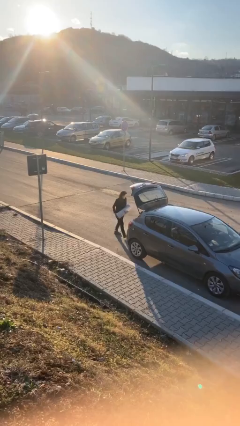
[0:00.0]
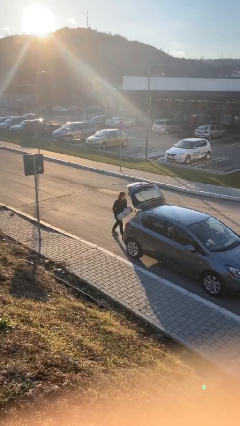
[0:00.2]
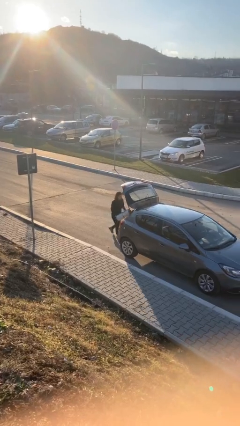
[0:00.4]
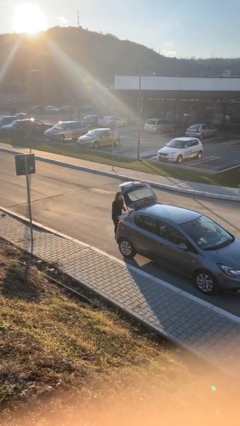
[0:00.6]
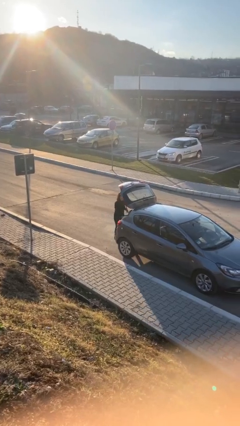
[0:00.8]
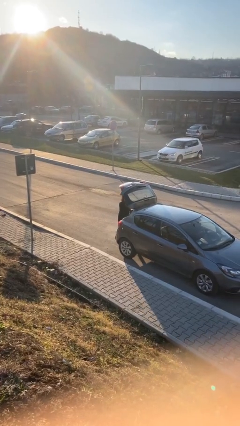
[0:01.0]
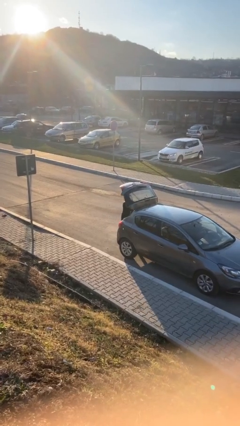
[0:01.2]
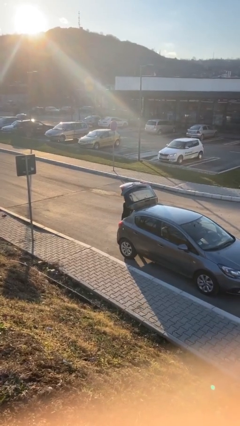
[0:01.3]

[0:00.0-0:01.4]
person loads car

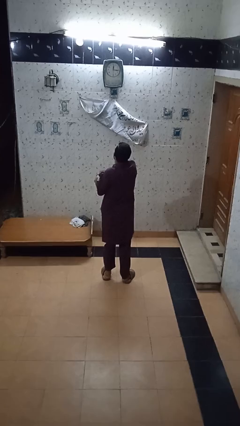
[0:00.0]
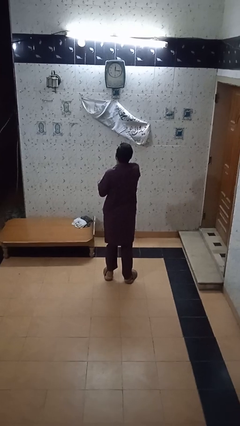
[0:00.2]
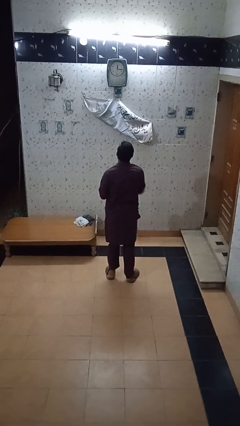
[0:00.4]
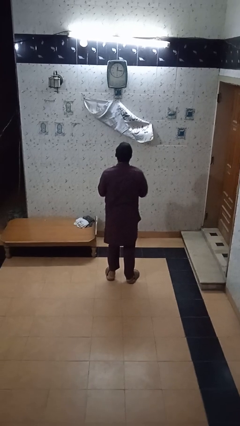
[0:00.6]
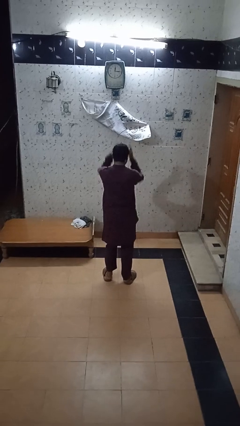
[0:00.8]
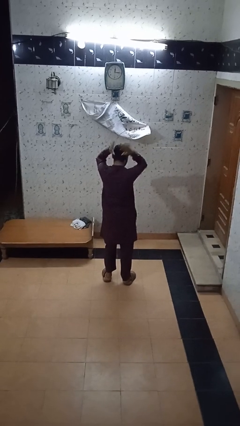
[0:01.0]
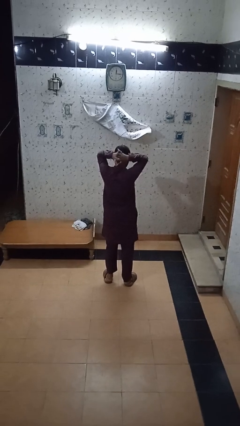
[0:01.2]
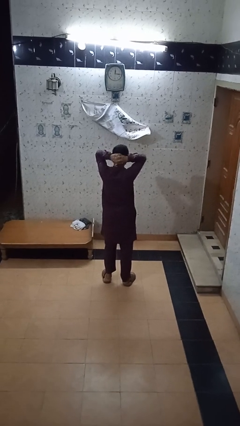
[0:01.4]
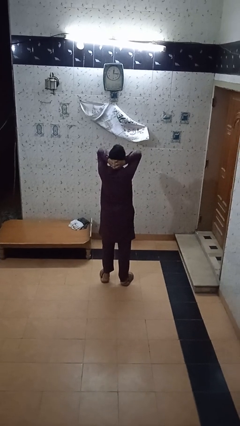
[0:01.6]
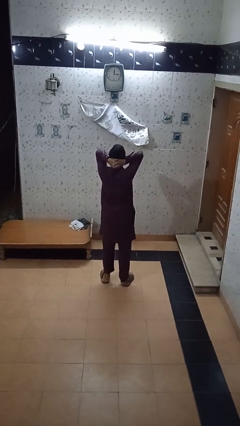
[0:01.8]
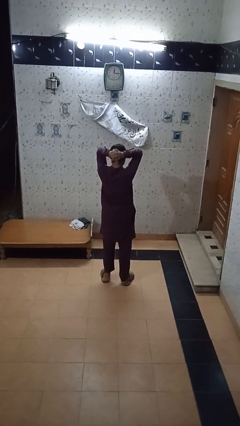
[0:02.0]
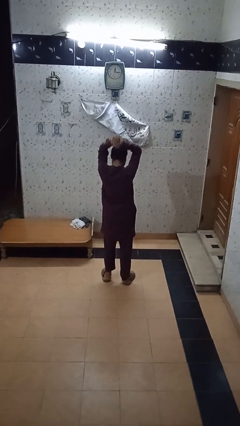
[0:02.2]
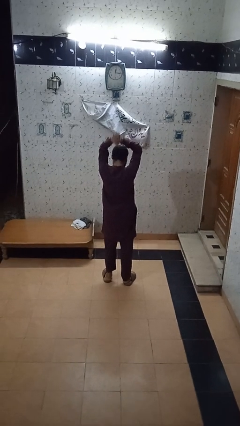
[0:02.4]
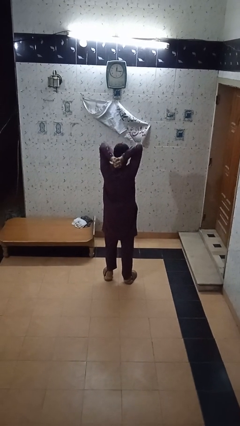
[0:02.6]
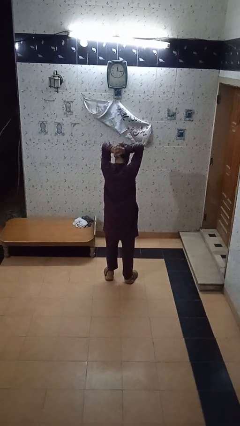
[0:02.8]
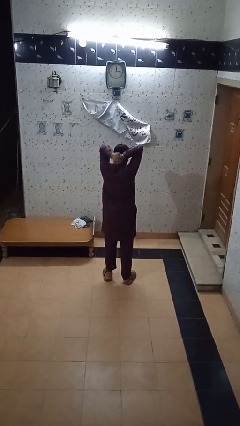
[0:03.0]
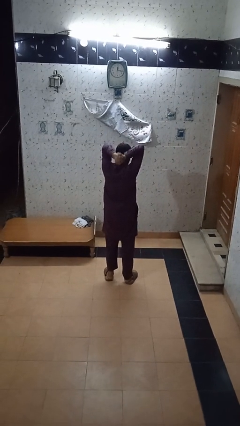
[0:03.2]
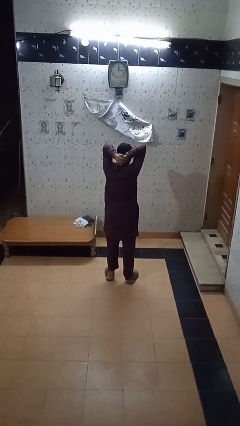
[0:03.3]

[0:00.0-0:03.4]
person stretches arms over head

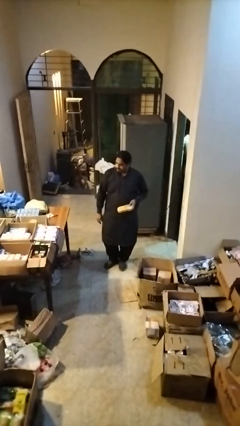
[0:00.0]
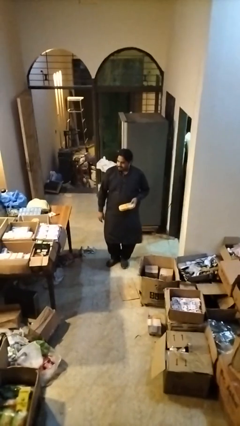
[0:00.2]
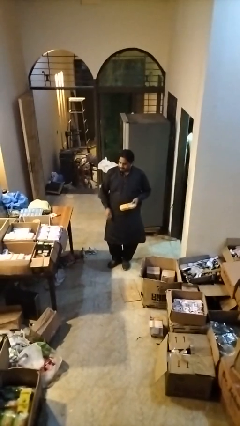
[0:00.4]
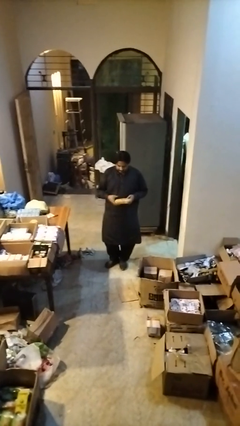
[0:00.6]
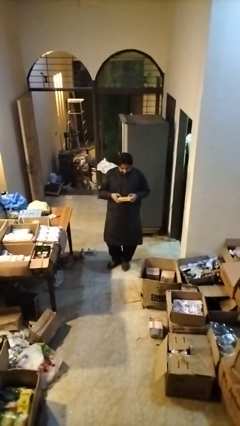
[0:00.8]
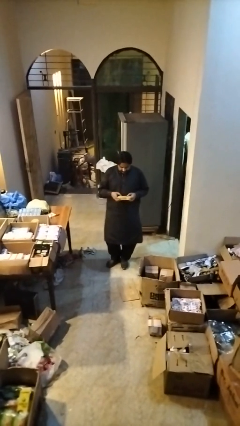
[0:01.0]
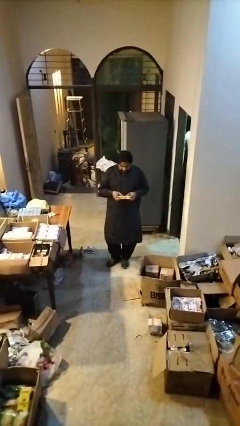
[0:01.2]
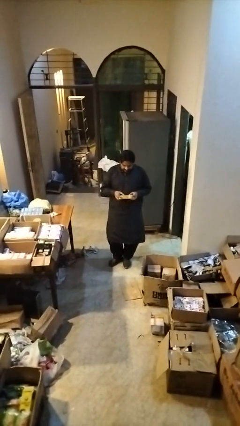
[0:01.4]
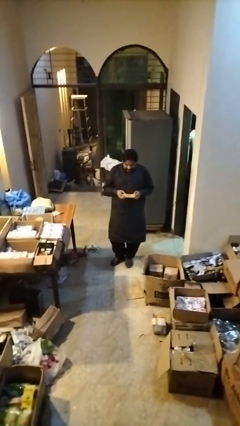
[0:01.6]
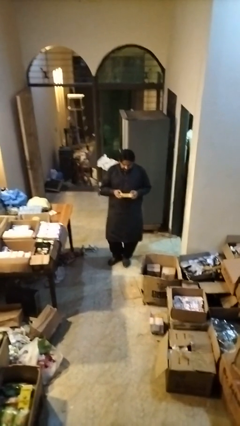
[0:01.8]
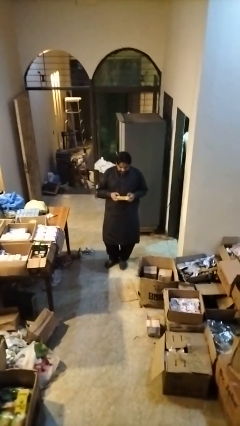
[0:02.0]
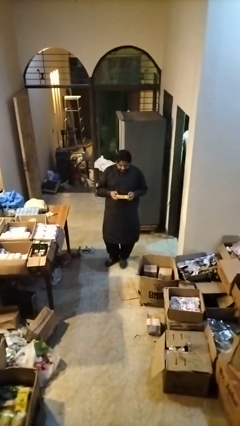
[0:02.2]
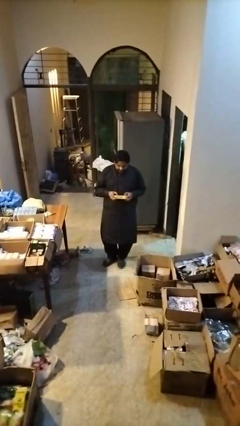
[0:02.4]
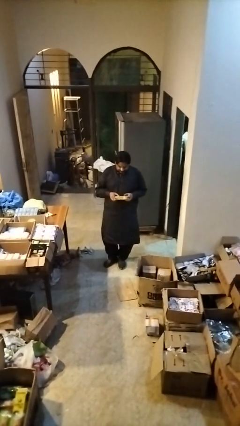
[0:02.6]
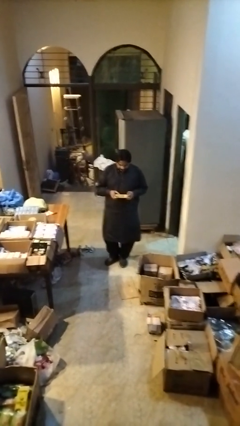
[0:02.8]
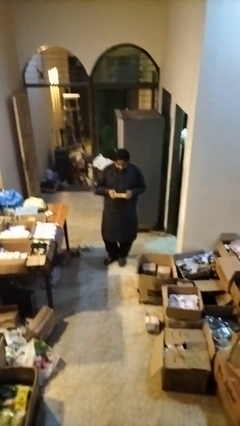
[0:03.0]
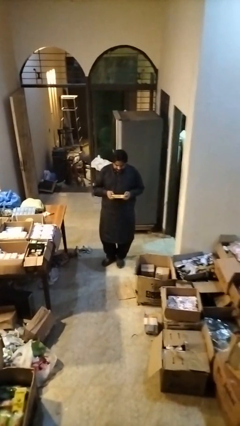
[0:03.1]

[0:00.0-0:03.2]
person interacts with handheld game

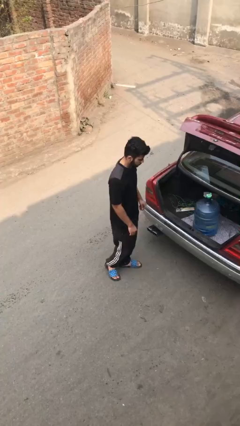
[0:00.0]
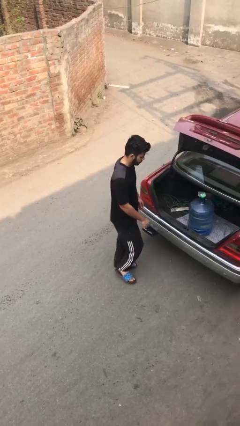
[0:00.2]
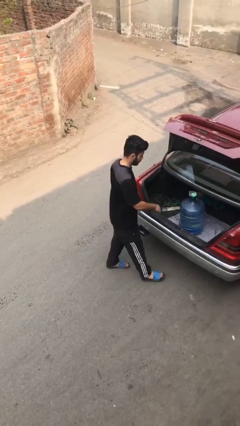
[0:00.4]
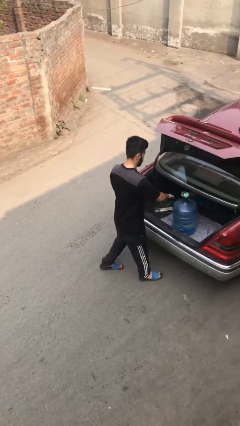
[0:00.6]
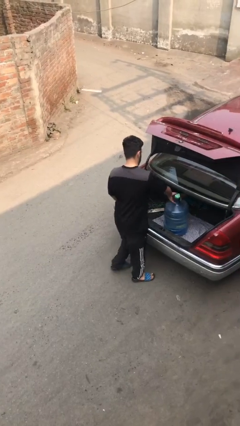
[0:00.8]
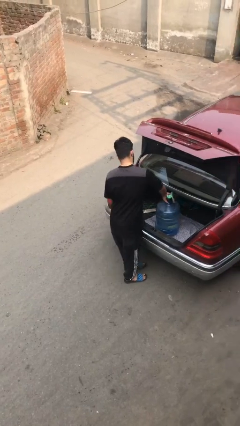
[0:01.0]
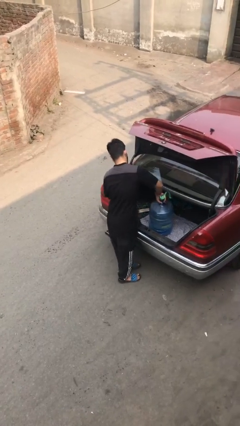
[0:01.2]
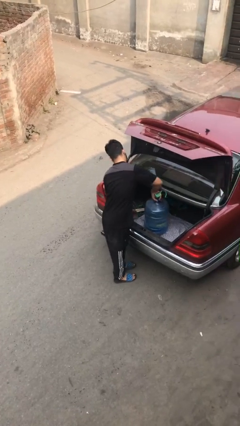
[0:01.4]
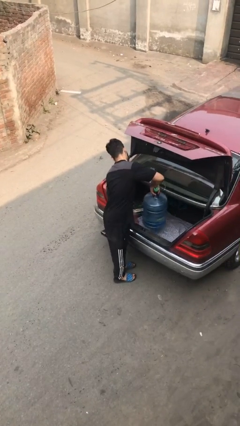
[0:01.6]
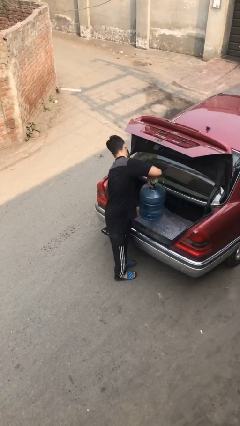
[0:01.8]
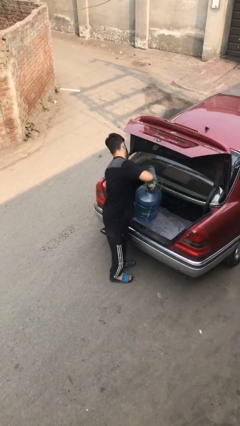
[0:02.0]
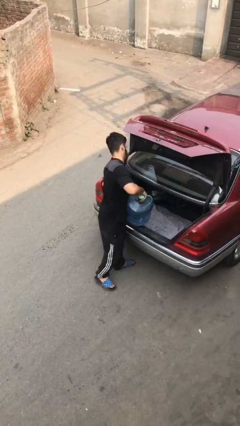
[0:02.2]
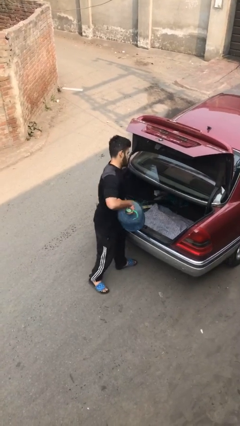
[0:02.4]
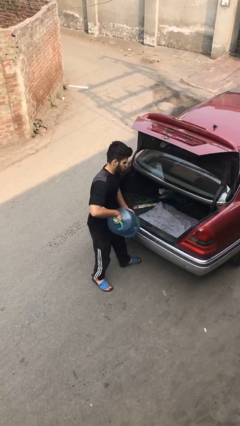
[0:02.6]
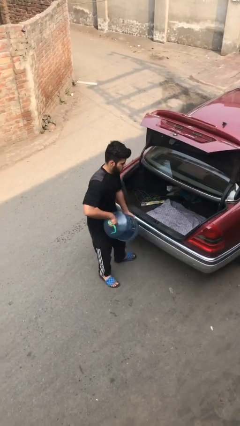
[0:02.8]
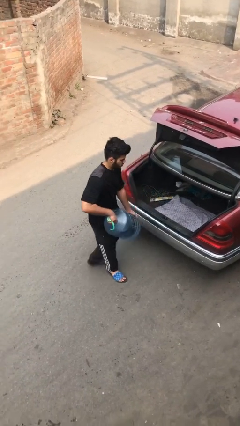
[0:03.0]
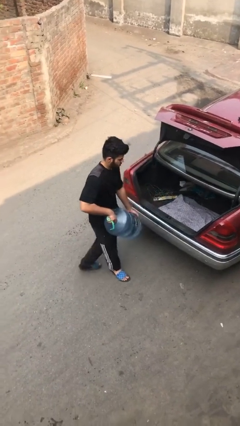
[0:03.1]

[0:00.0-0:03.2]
person unloads car

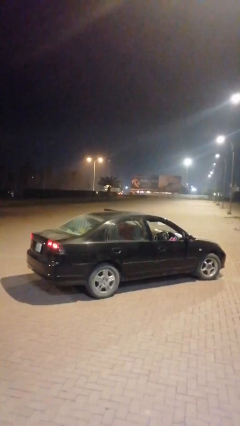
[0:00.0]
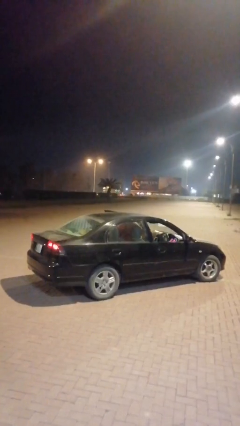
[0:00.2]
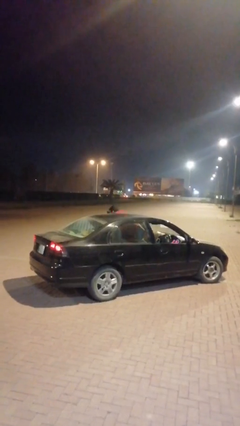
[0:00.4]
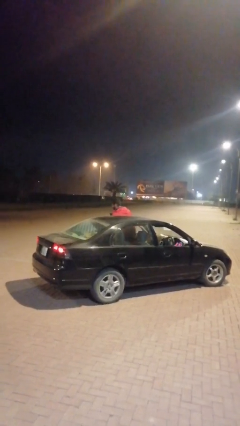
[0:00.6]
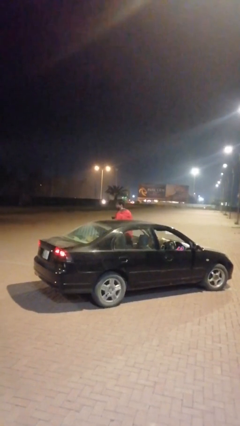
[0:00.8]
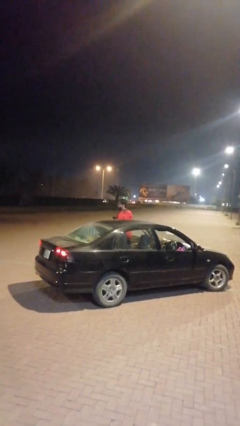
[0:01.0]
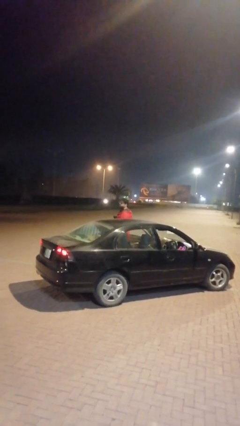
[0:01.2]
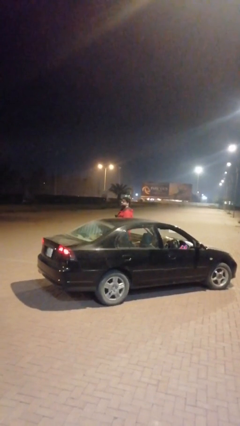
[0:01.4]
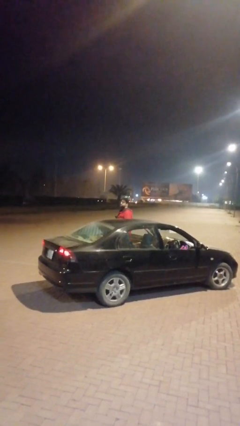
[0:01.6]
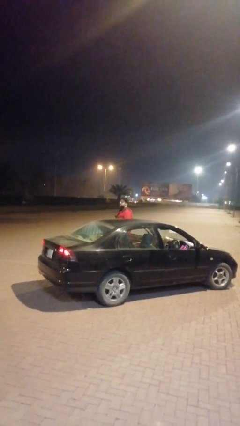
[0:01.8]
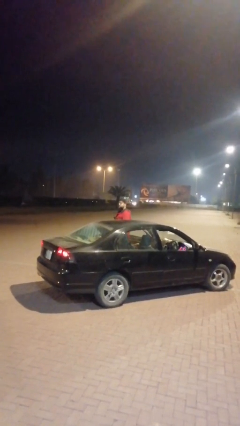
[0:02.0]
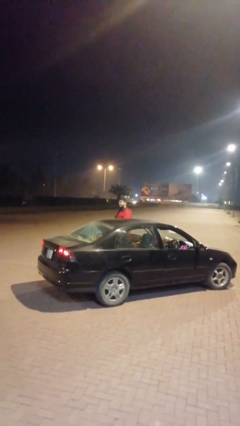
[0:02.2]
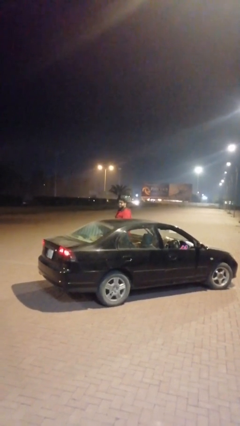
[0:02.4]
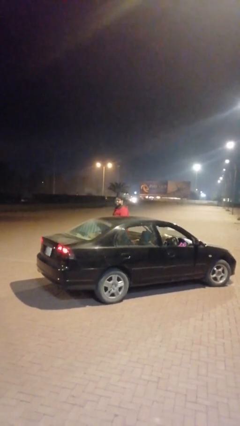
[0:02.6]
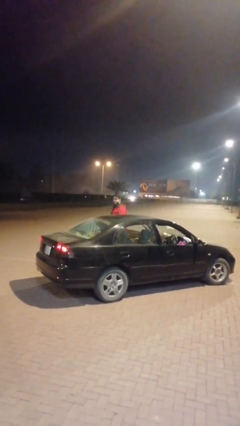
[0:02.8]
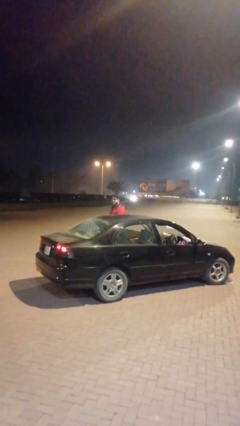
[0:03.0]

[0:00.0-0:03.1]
person exits car

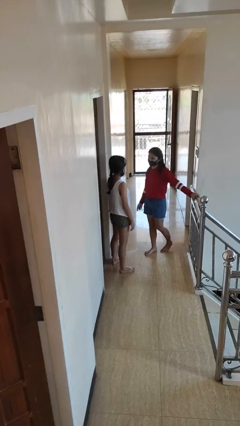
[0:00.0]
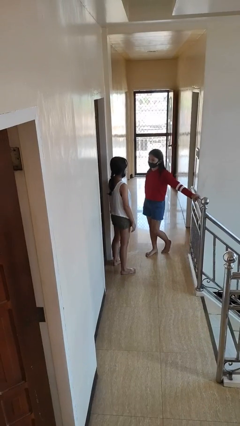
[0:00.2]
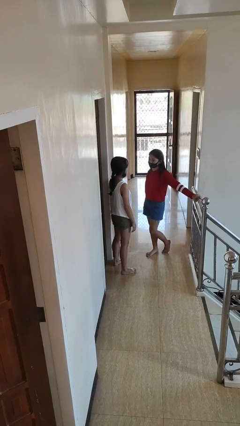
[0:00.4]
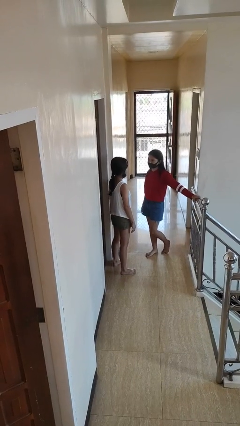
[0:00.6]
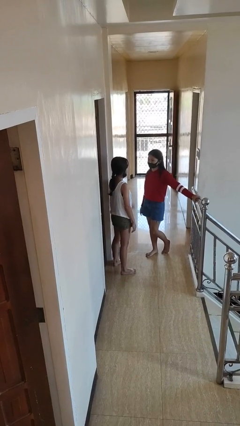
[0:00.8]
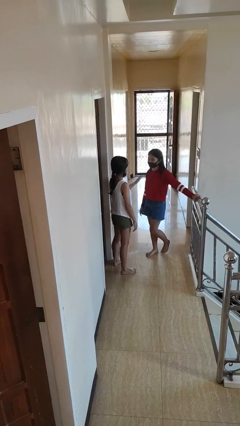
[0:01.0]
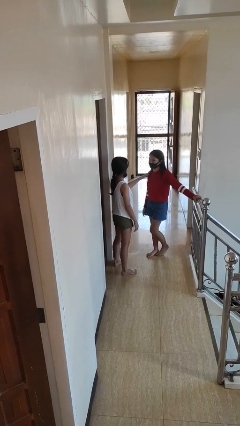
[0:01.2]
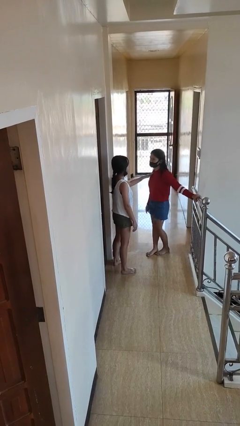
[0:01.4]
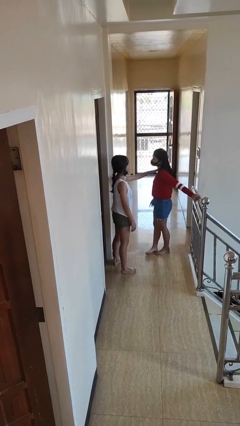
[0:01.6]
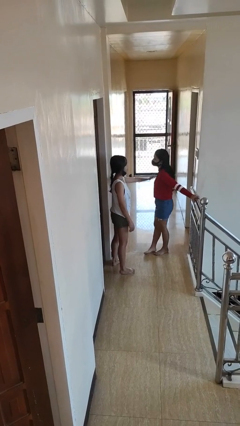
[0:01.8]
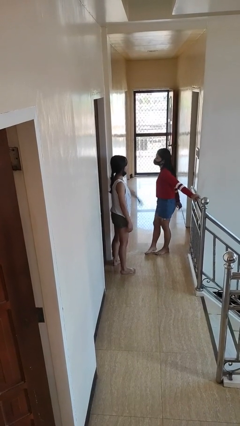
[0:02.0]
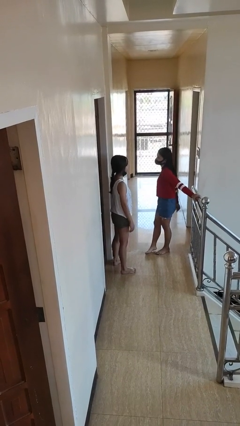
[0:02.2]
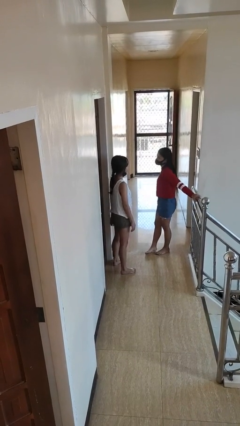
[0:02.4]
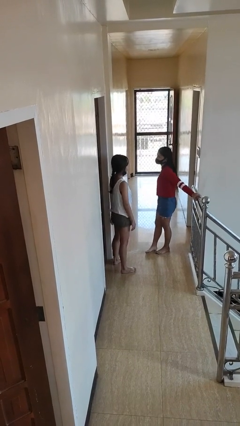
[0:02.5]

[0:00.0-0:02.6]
person shoves person

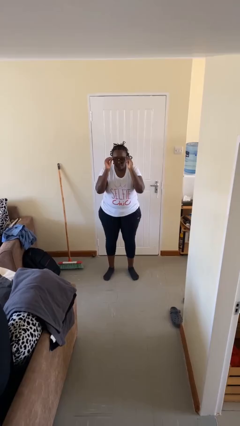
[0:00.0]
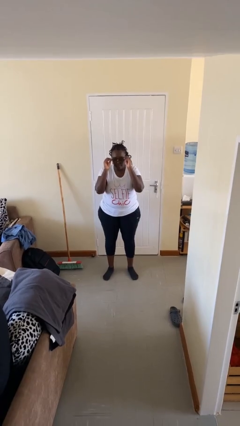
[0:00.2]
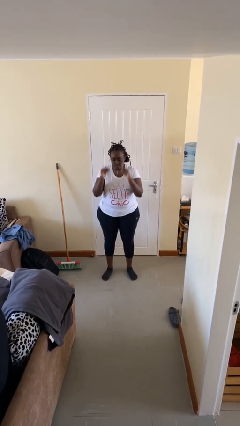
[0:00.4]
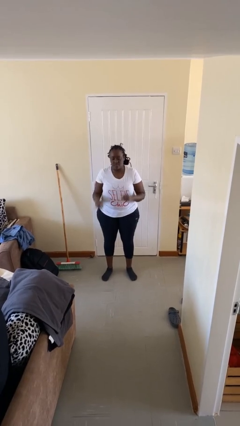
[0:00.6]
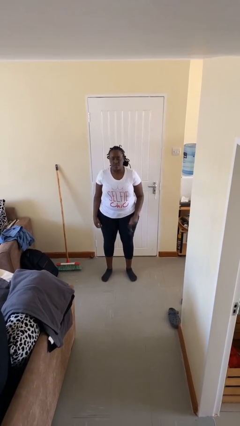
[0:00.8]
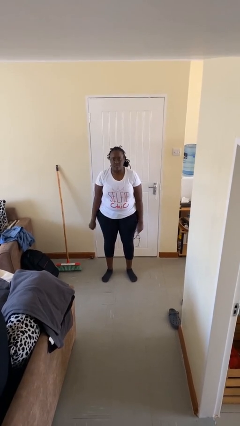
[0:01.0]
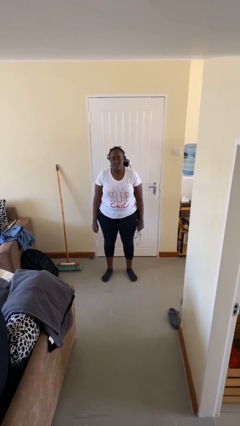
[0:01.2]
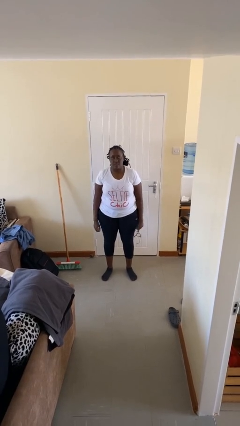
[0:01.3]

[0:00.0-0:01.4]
person takes off glasses
